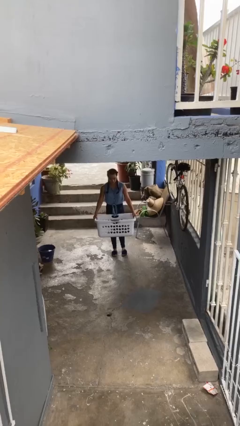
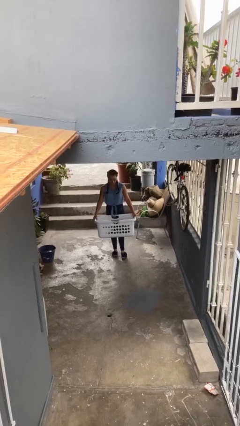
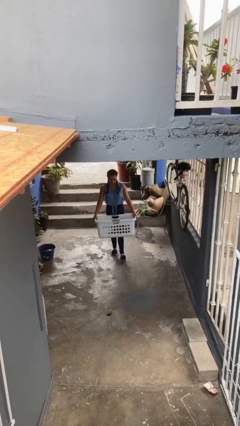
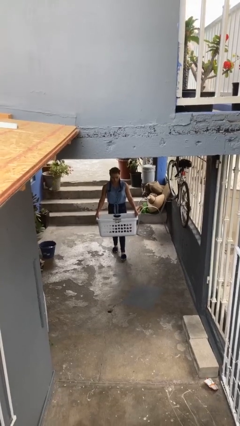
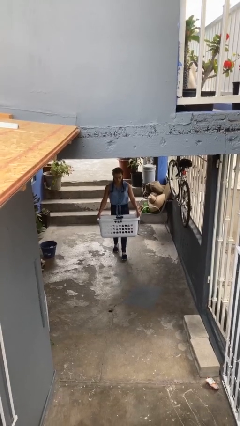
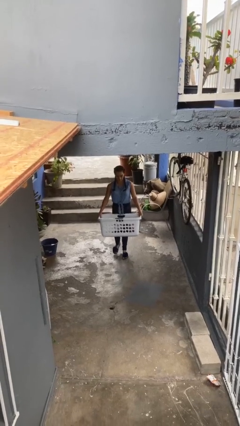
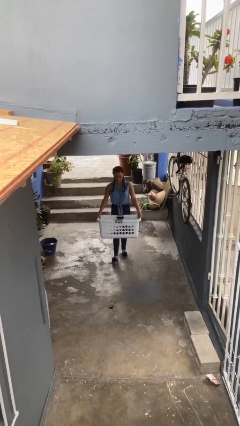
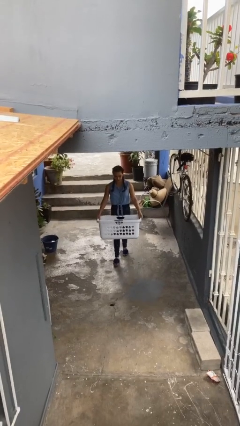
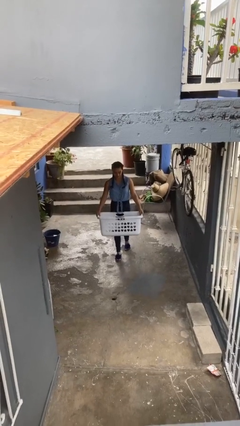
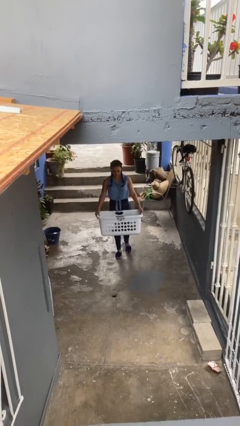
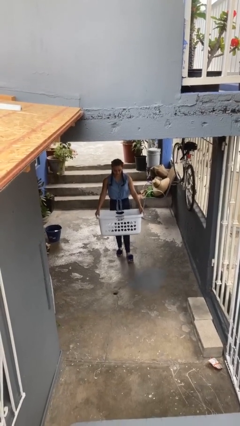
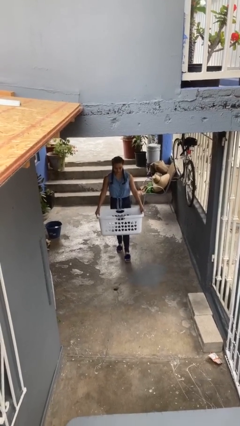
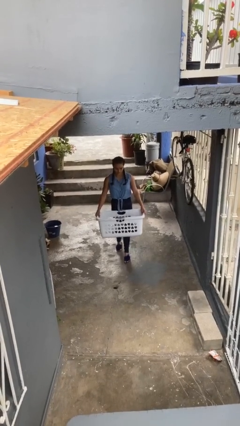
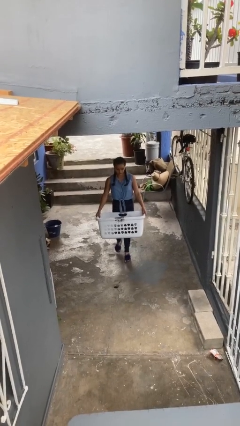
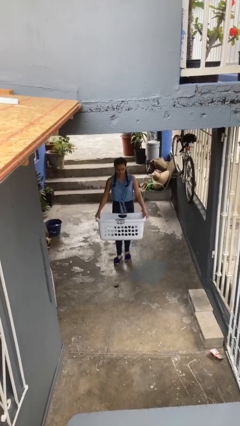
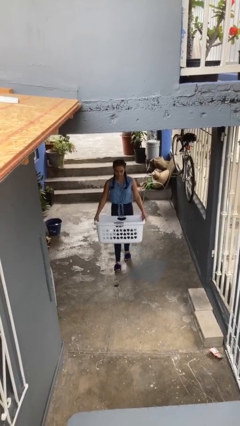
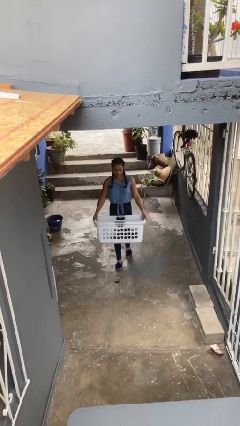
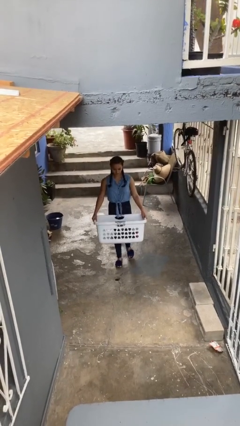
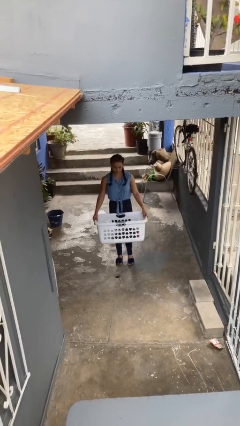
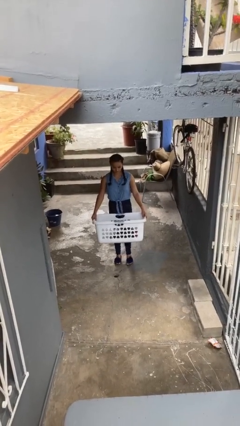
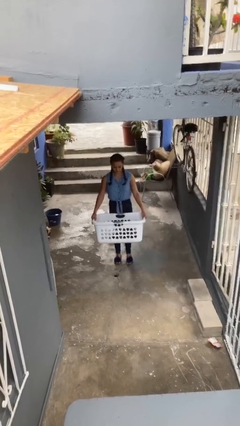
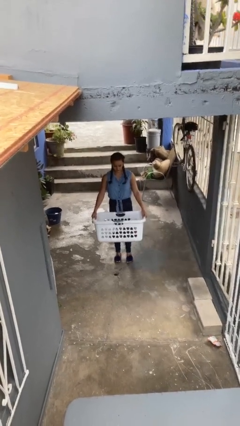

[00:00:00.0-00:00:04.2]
person carries heavy object

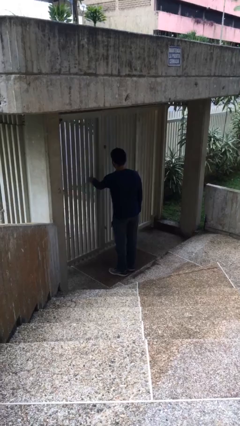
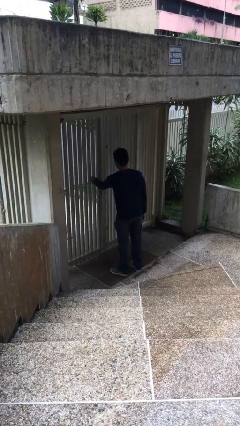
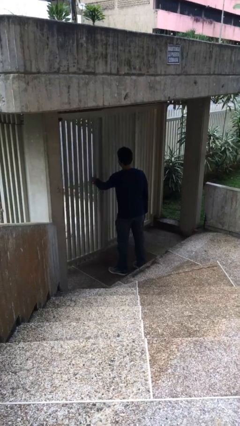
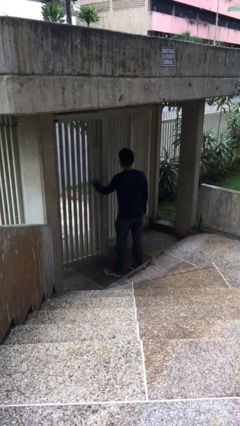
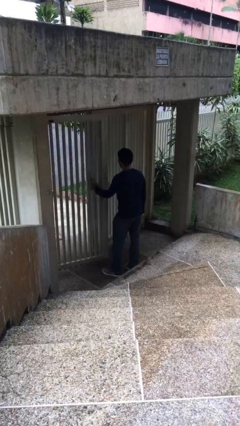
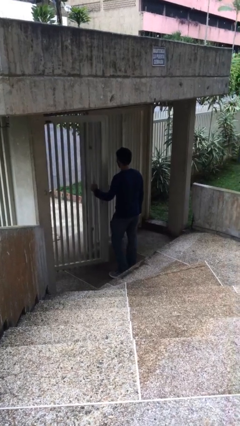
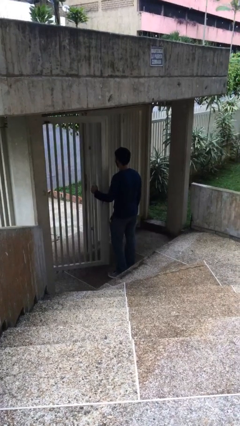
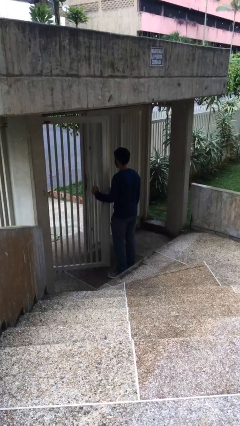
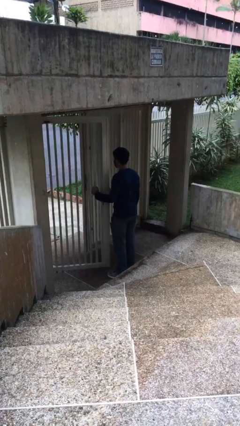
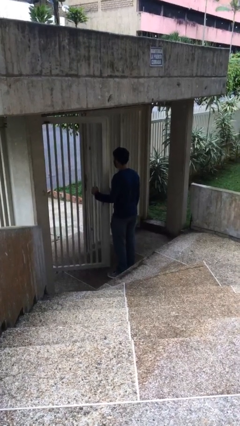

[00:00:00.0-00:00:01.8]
person opens facility door

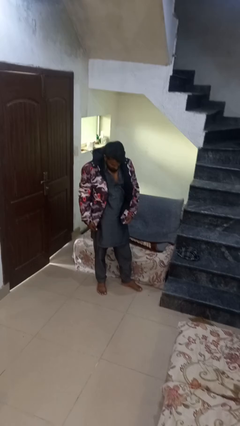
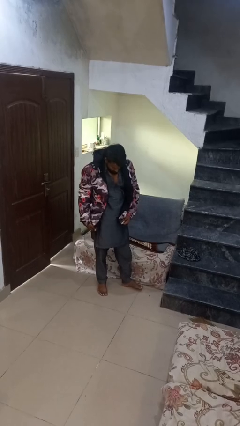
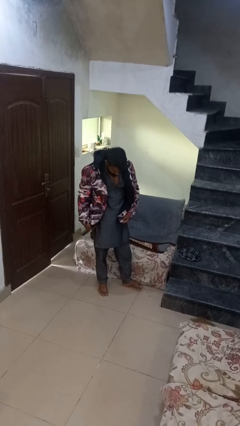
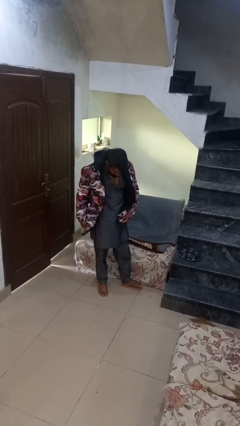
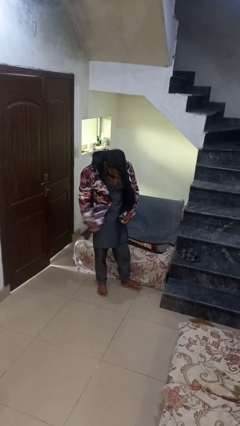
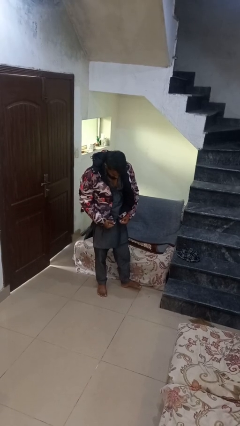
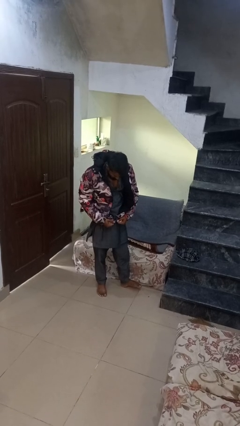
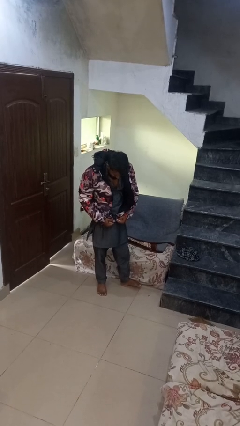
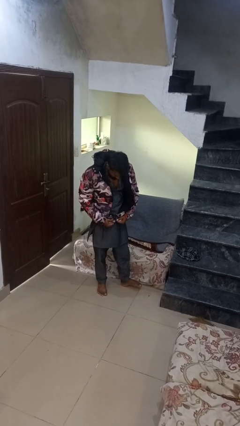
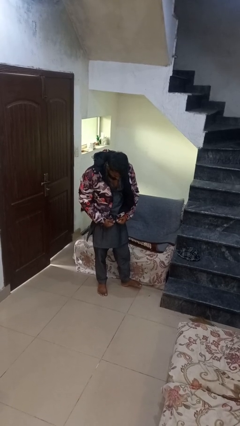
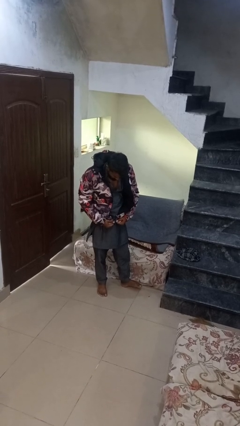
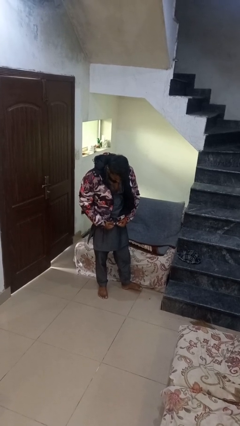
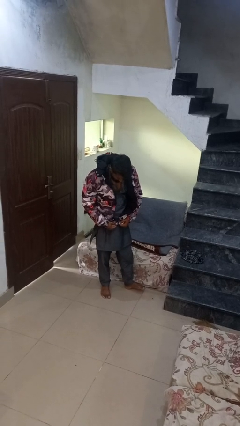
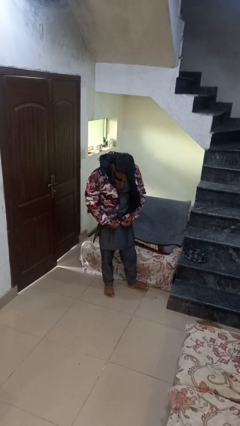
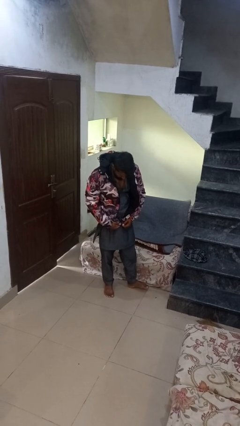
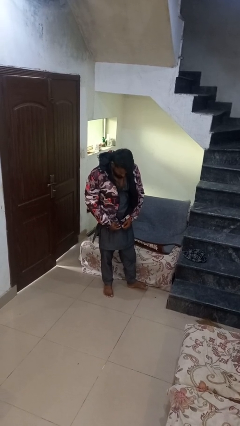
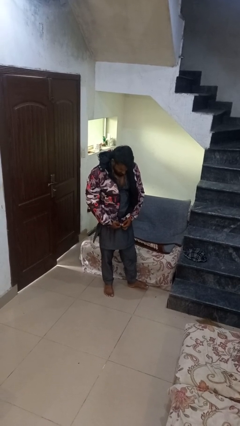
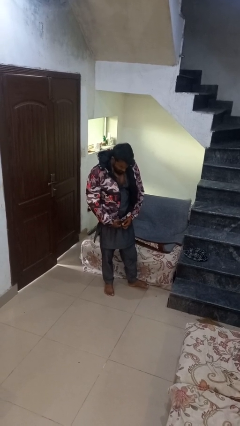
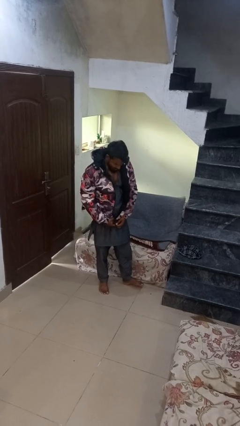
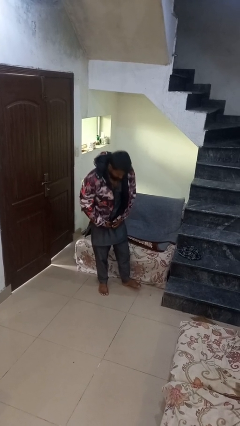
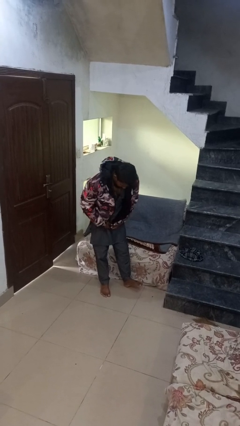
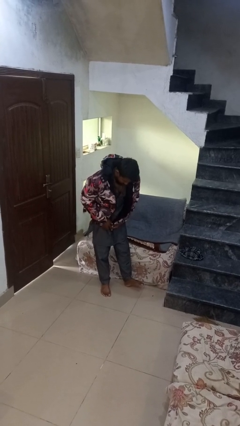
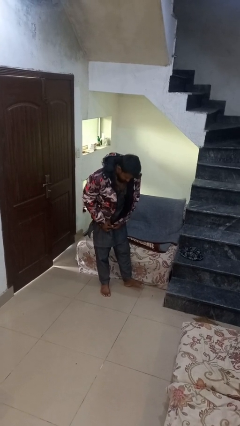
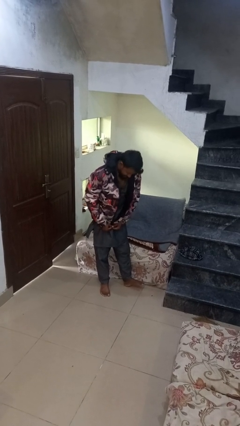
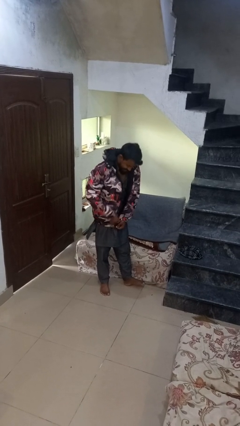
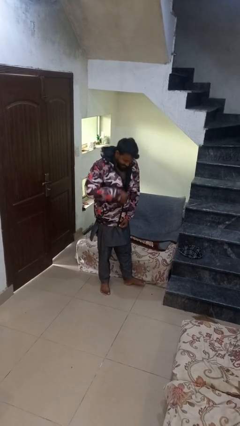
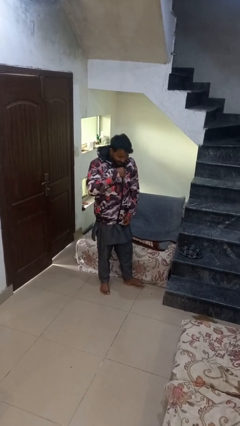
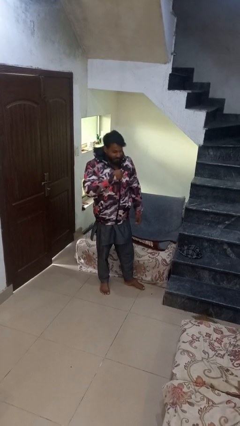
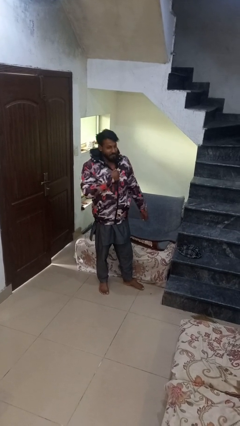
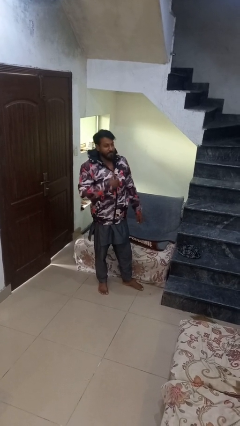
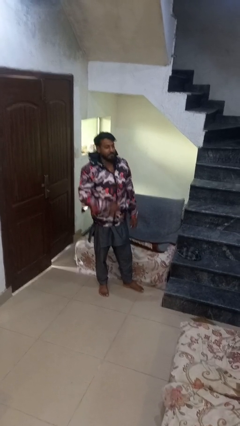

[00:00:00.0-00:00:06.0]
person zips up jacket

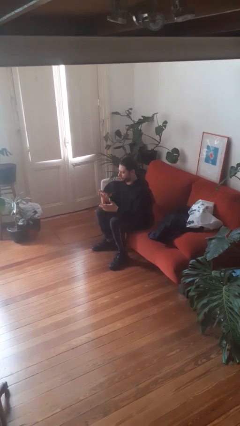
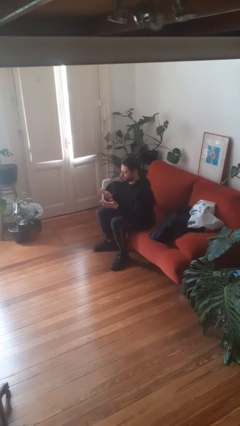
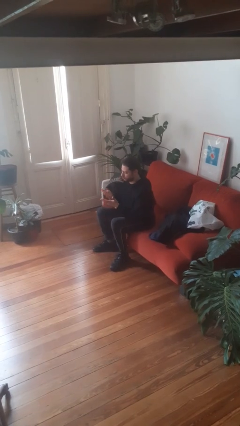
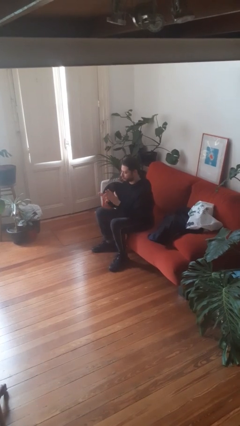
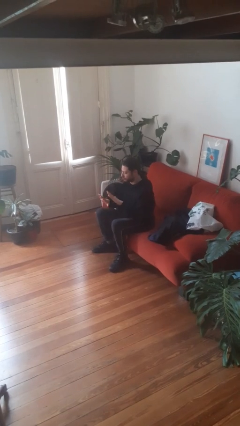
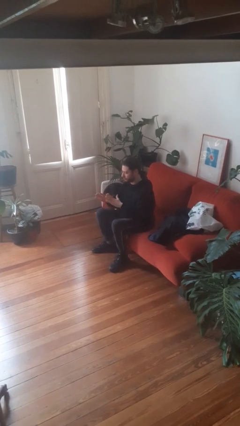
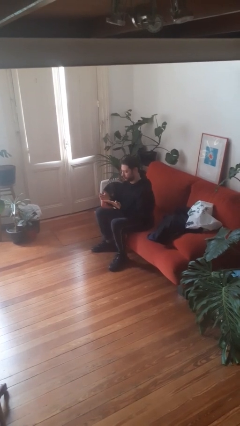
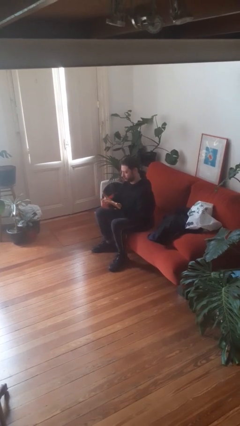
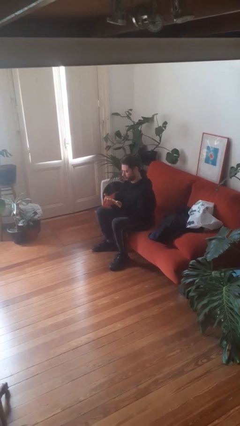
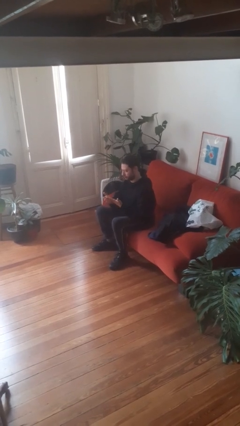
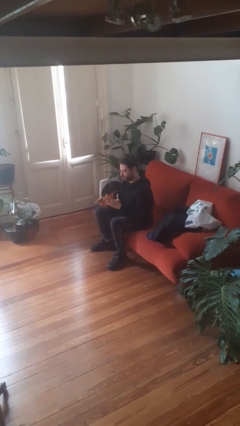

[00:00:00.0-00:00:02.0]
person looks at hands in lap

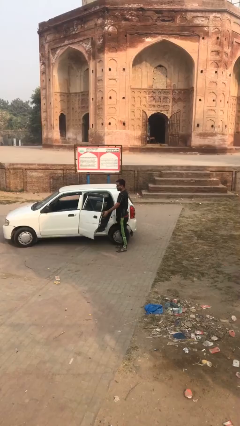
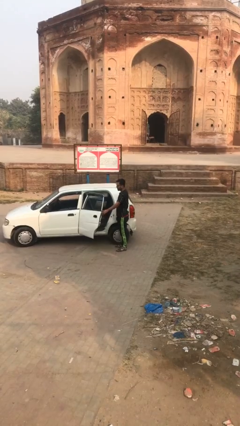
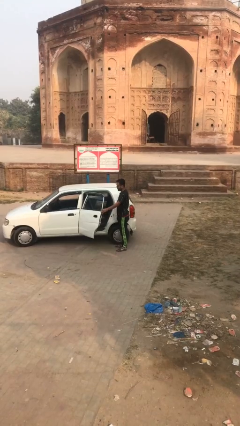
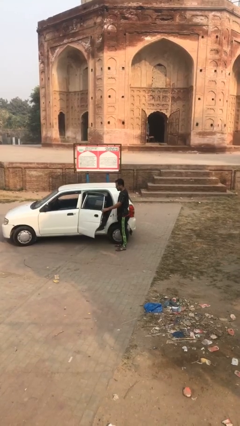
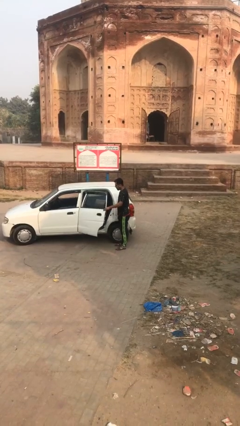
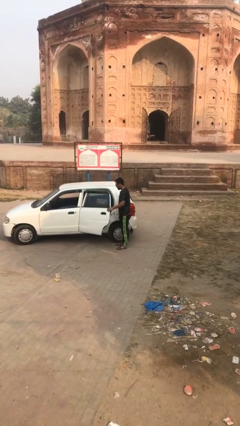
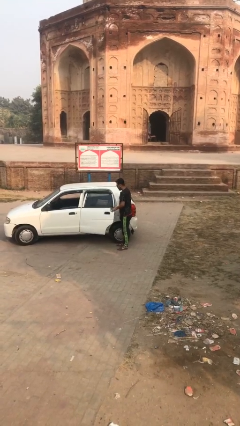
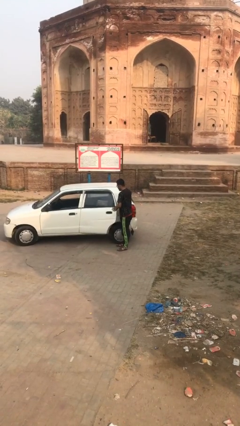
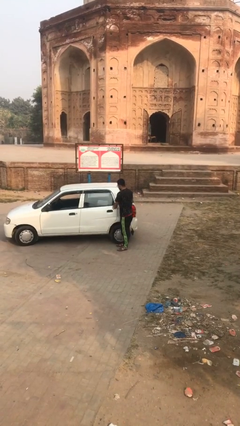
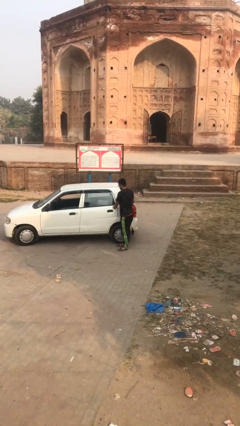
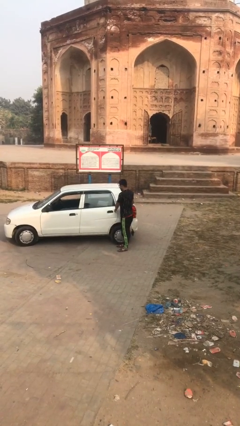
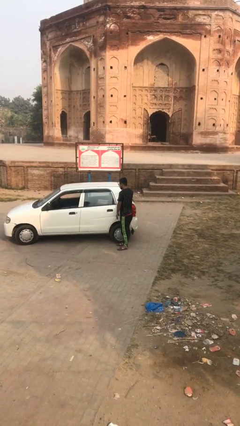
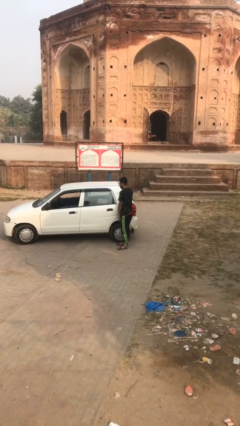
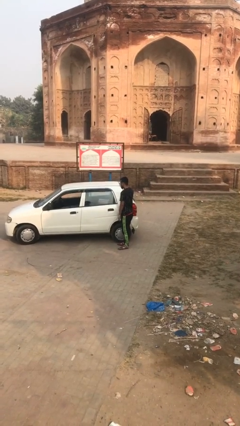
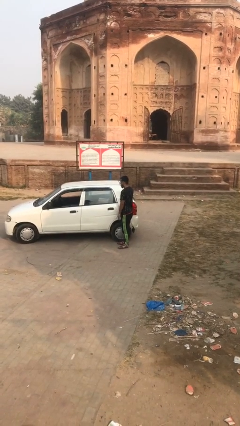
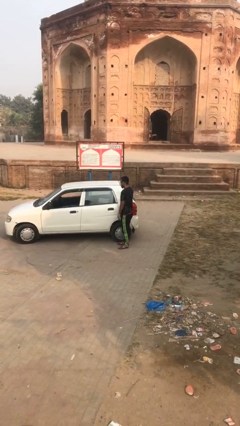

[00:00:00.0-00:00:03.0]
person closes car door

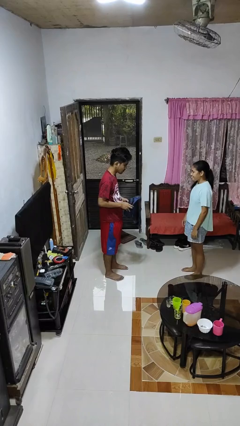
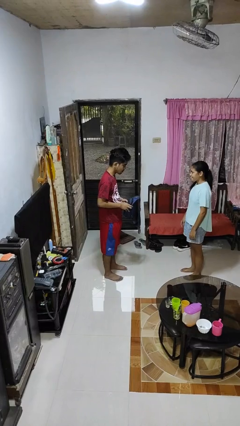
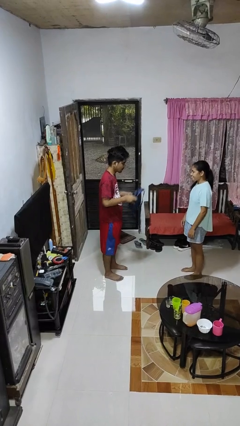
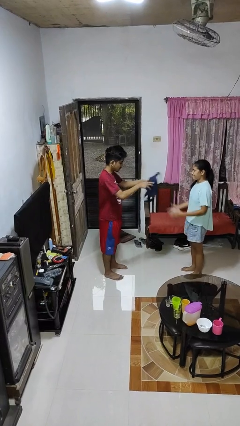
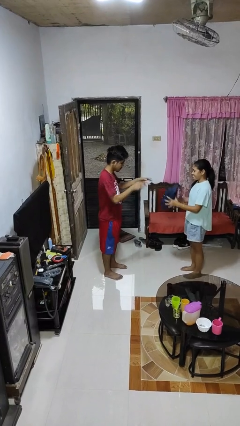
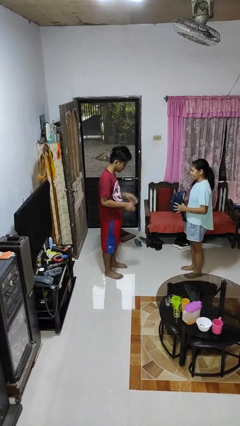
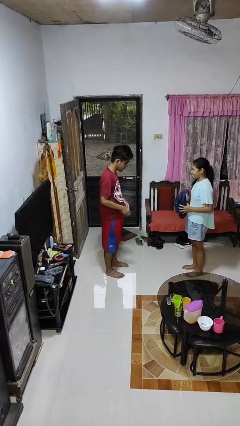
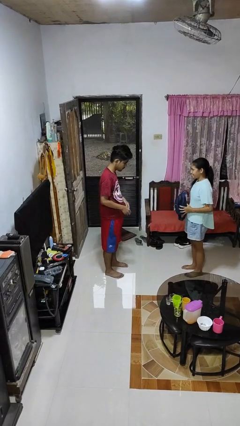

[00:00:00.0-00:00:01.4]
person throws object to person
